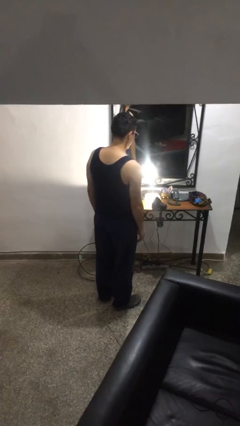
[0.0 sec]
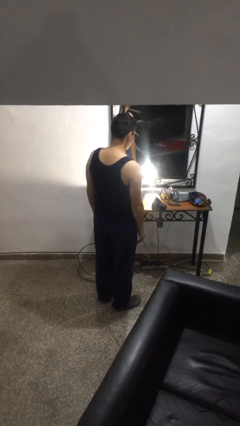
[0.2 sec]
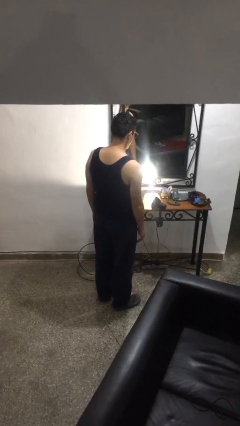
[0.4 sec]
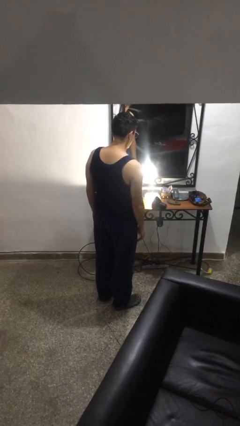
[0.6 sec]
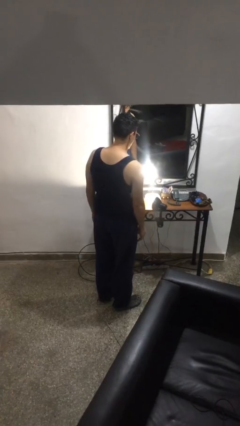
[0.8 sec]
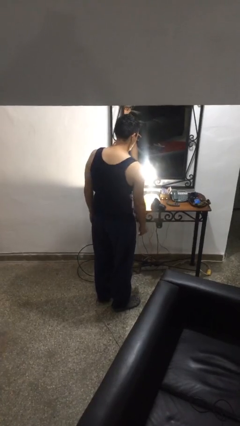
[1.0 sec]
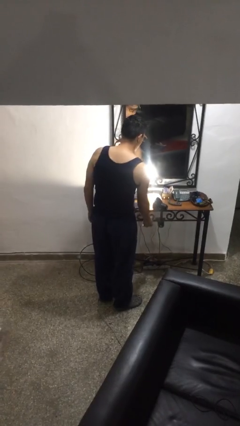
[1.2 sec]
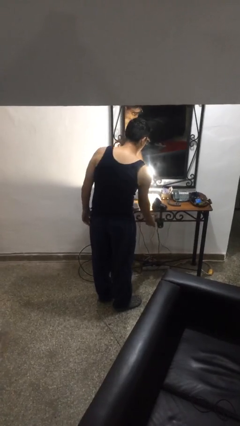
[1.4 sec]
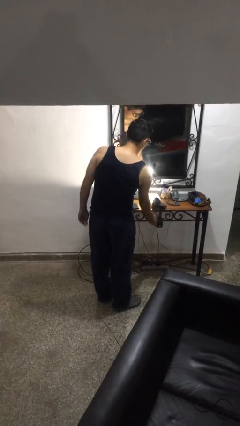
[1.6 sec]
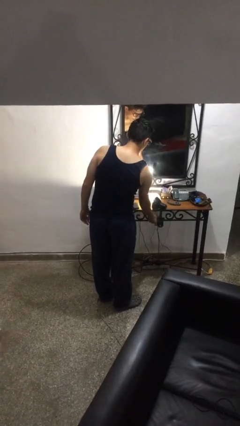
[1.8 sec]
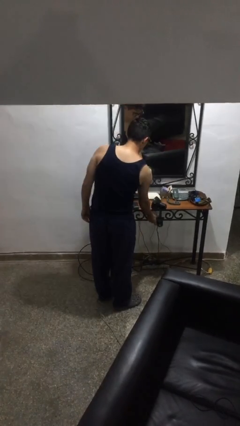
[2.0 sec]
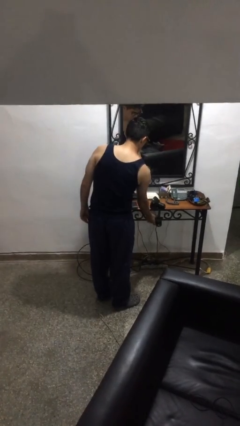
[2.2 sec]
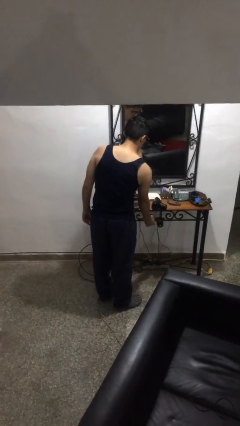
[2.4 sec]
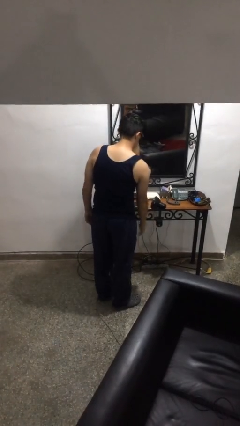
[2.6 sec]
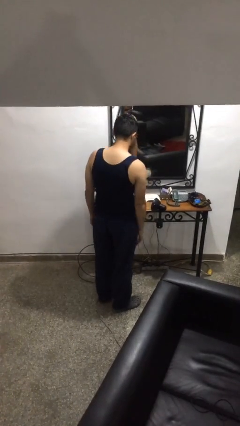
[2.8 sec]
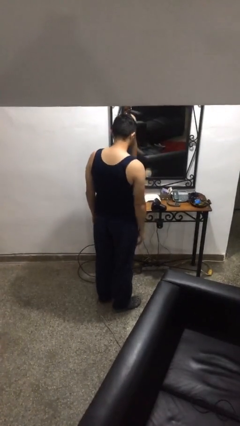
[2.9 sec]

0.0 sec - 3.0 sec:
person turns off lamp

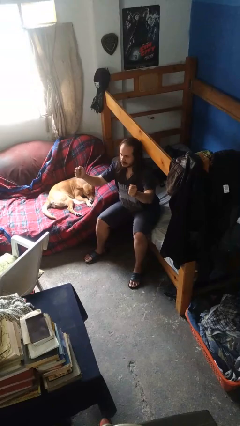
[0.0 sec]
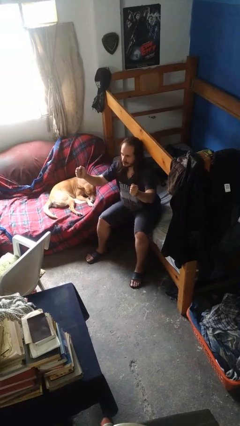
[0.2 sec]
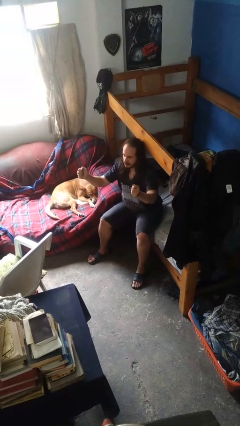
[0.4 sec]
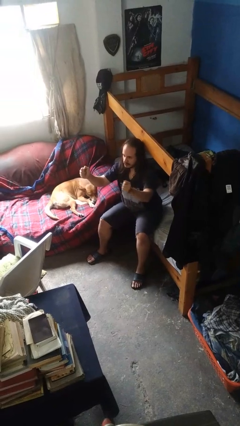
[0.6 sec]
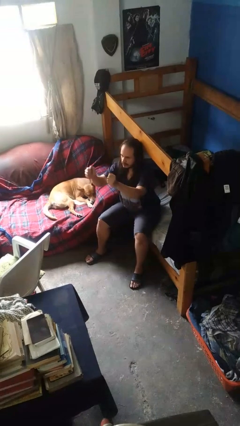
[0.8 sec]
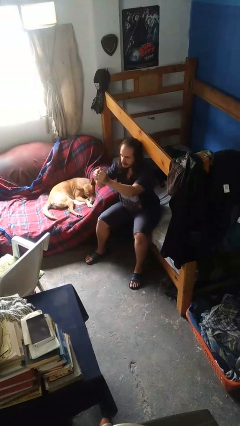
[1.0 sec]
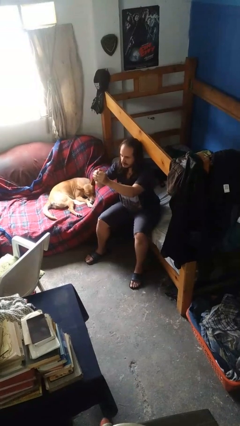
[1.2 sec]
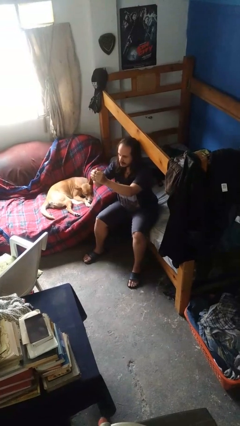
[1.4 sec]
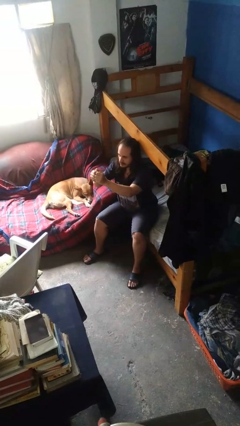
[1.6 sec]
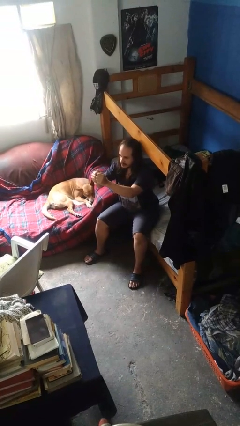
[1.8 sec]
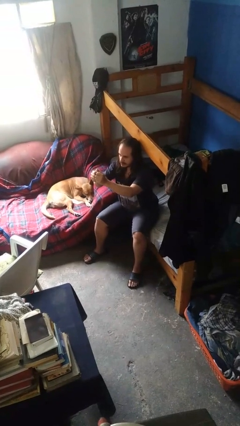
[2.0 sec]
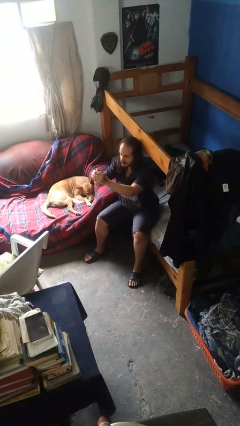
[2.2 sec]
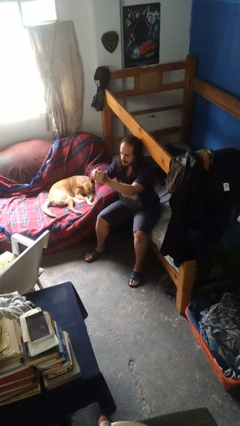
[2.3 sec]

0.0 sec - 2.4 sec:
person gestures zoom out

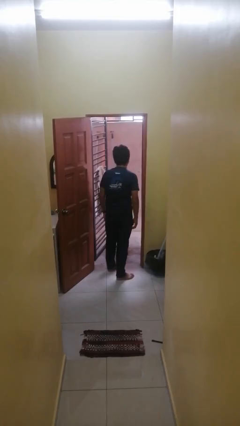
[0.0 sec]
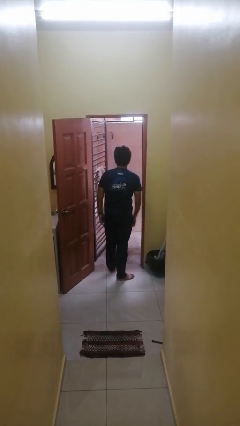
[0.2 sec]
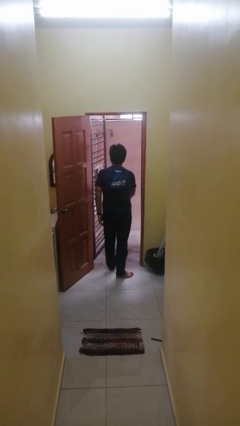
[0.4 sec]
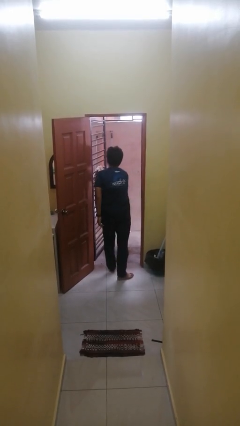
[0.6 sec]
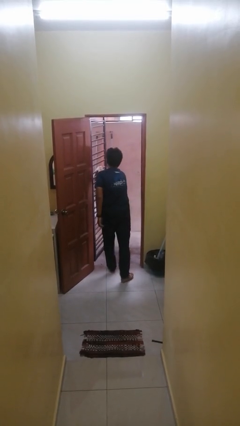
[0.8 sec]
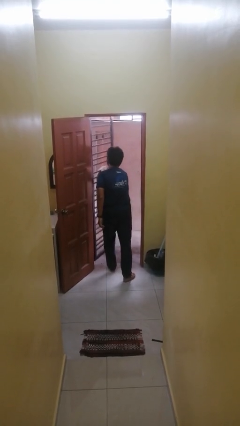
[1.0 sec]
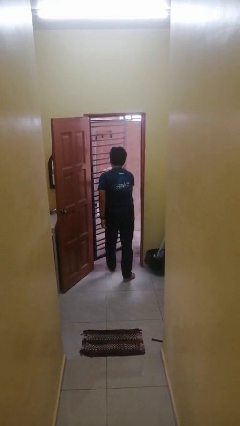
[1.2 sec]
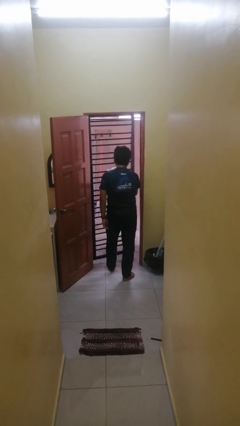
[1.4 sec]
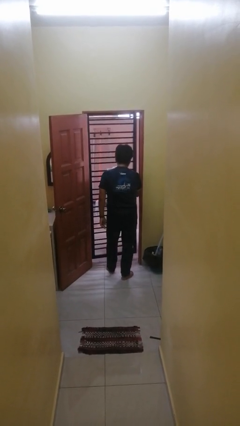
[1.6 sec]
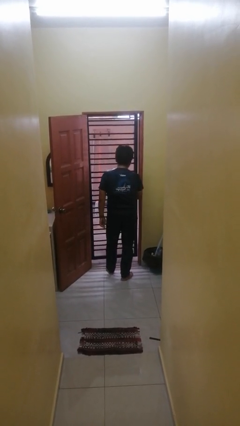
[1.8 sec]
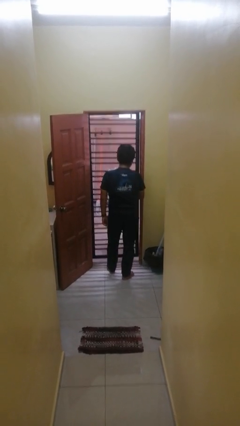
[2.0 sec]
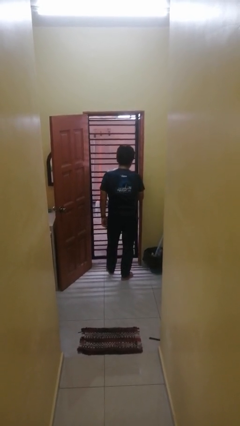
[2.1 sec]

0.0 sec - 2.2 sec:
person closes gate

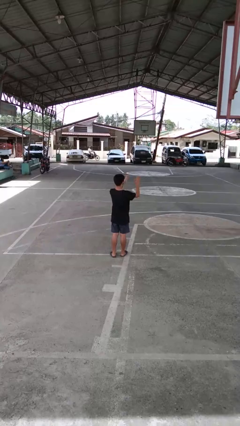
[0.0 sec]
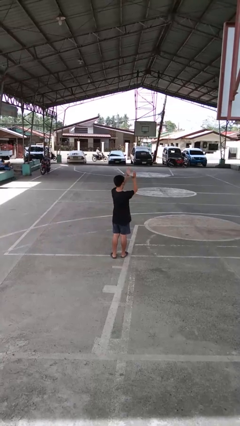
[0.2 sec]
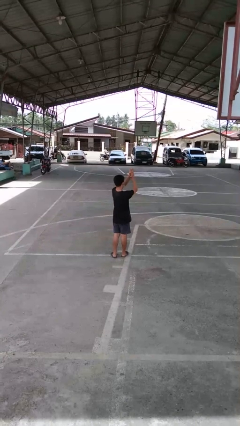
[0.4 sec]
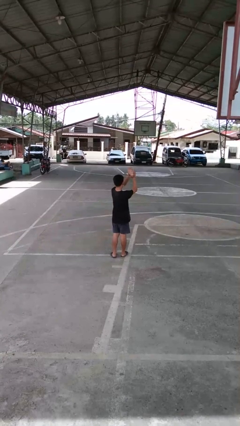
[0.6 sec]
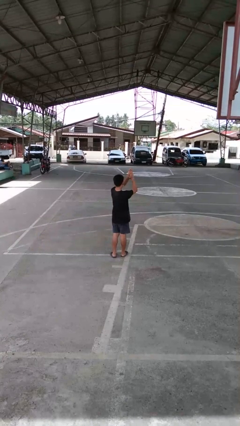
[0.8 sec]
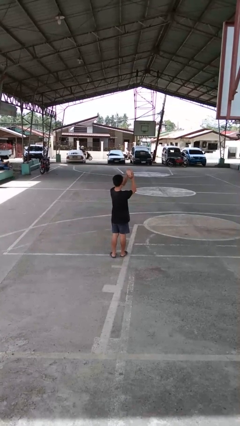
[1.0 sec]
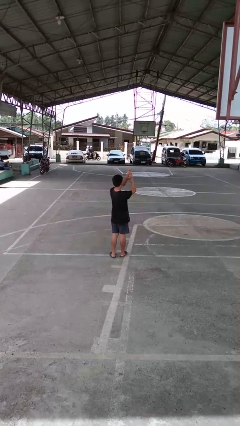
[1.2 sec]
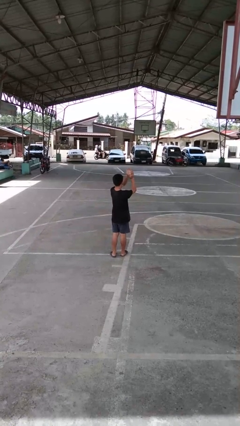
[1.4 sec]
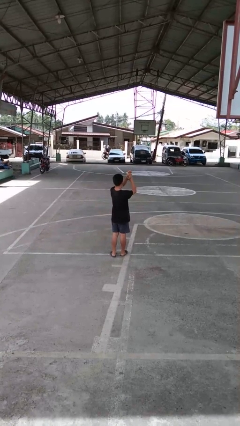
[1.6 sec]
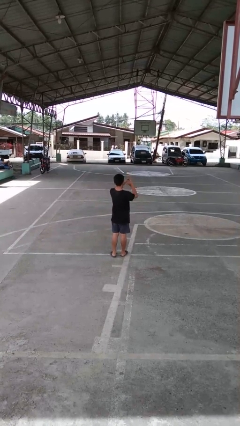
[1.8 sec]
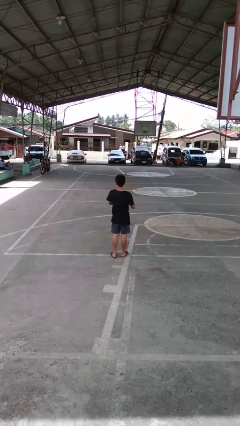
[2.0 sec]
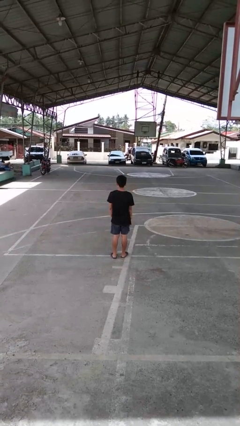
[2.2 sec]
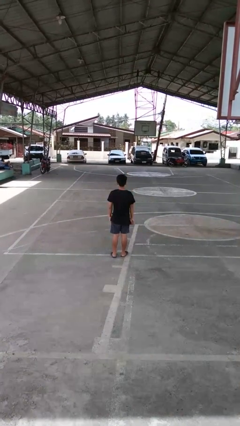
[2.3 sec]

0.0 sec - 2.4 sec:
person claps hands

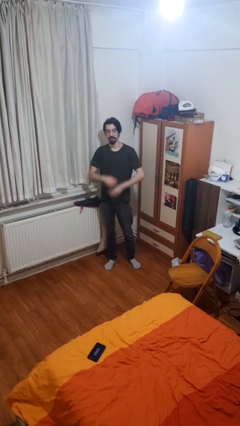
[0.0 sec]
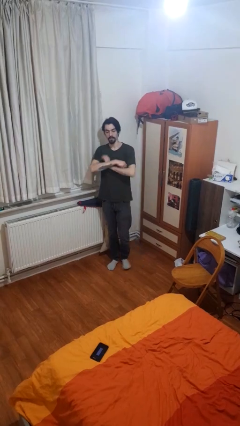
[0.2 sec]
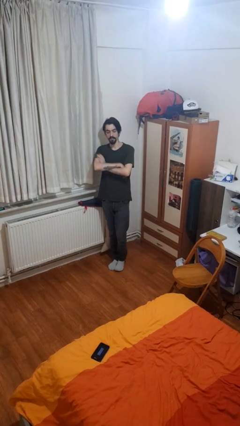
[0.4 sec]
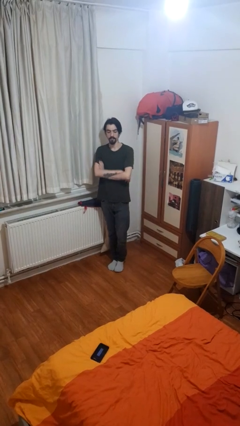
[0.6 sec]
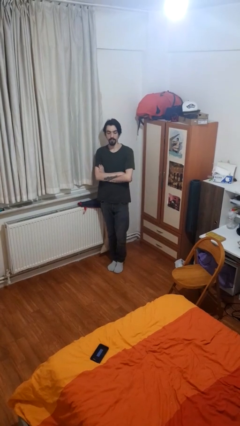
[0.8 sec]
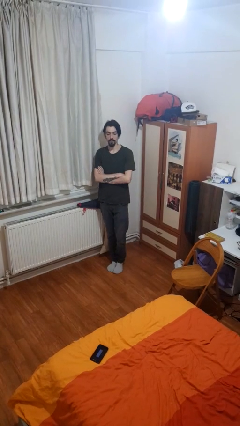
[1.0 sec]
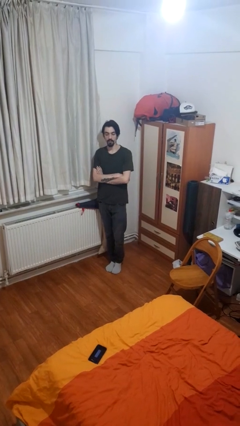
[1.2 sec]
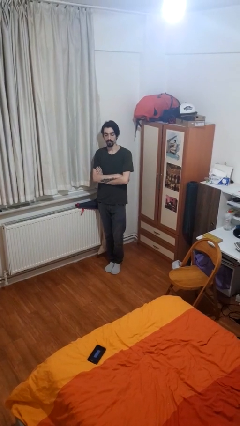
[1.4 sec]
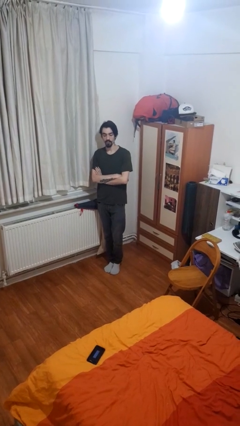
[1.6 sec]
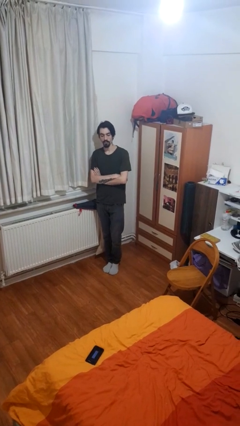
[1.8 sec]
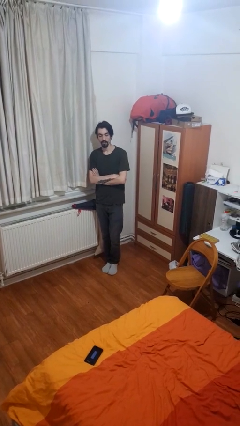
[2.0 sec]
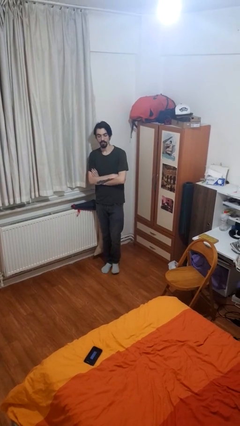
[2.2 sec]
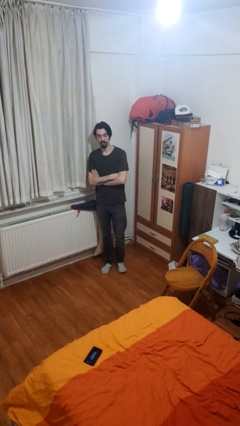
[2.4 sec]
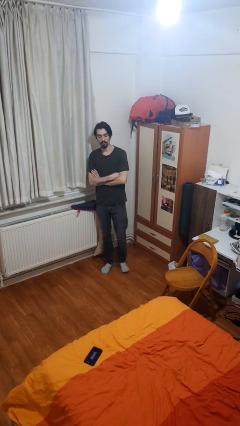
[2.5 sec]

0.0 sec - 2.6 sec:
person crosses arms

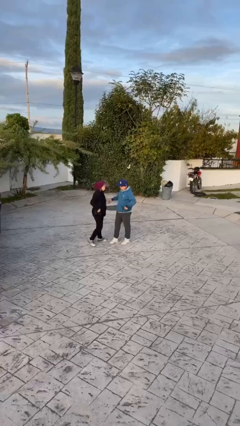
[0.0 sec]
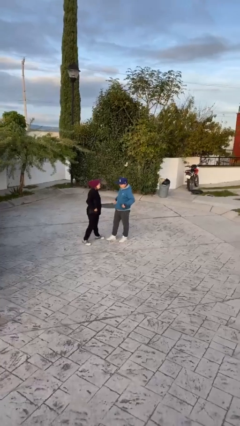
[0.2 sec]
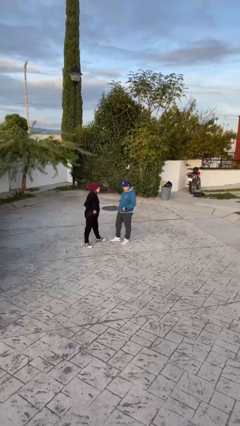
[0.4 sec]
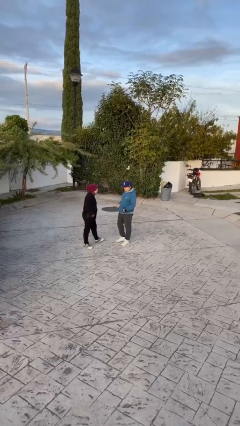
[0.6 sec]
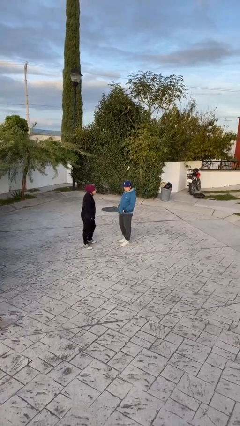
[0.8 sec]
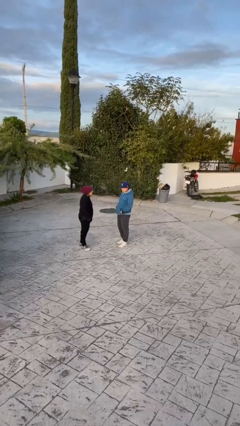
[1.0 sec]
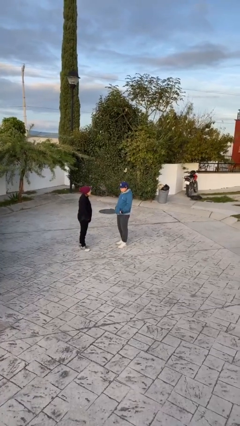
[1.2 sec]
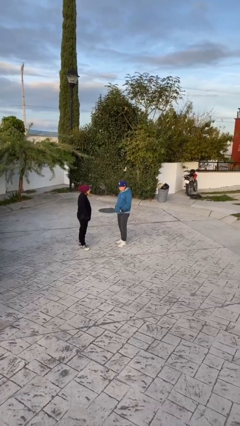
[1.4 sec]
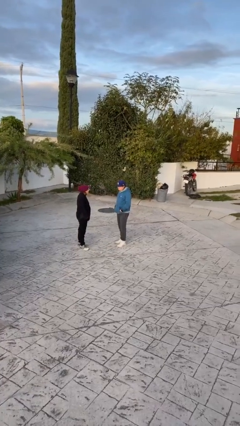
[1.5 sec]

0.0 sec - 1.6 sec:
person talks to person

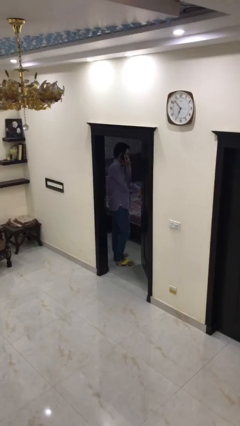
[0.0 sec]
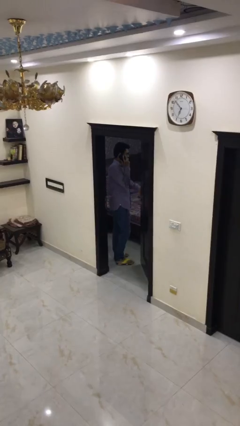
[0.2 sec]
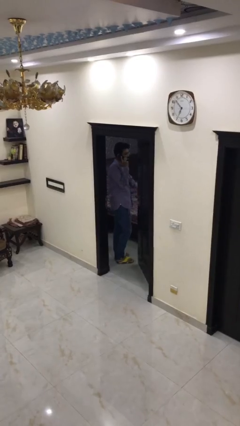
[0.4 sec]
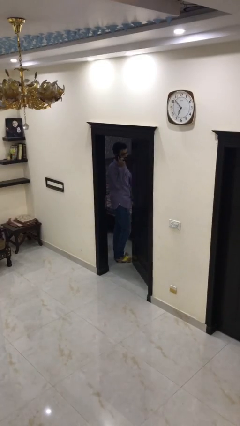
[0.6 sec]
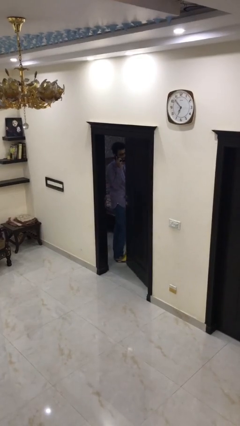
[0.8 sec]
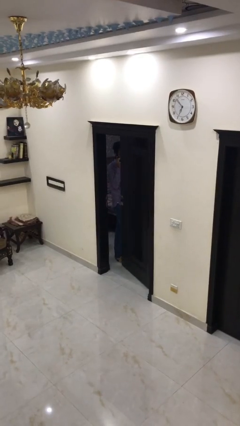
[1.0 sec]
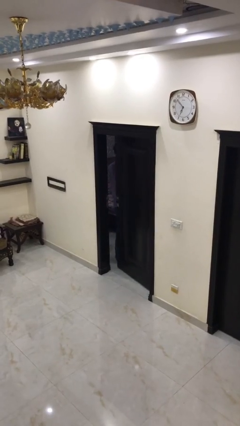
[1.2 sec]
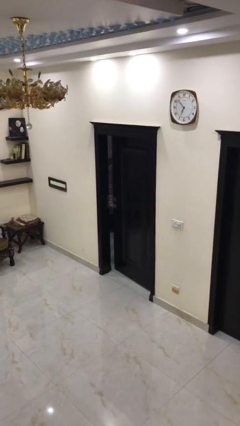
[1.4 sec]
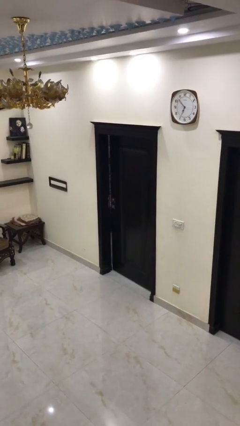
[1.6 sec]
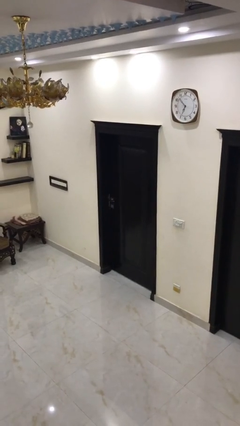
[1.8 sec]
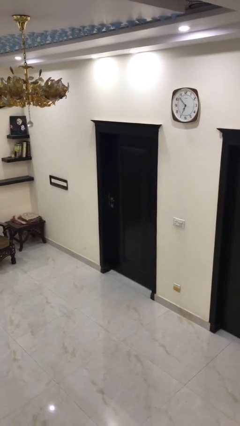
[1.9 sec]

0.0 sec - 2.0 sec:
person closes facility door

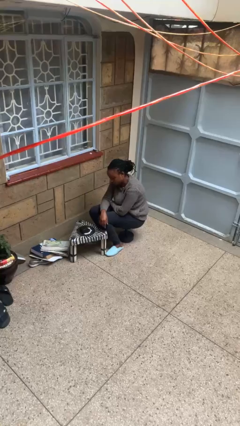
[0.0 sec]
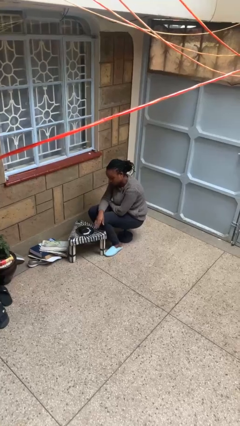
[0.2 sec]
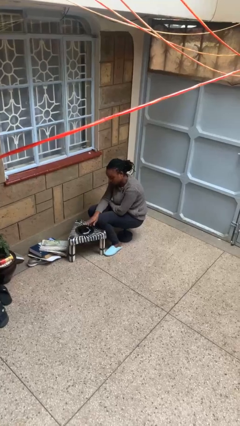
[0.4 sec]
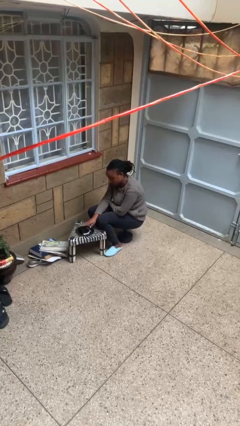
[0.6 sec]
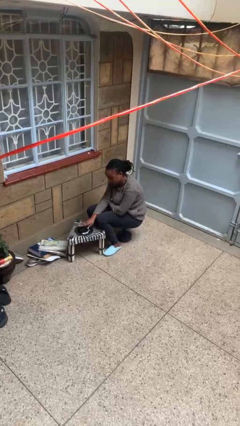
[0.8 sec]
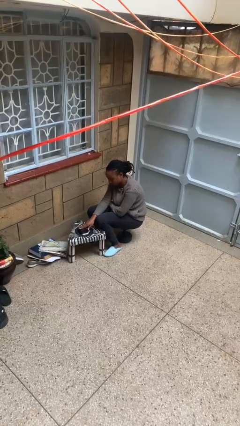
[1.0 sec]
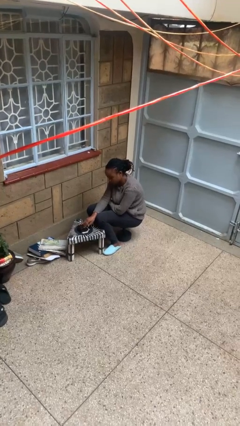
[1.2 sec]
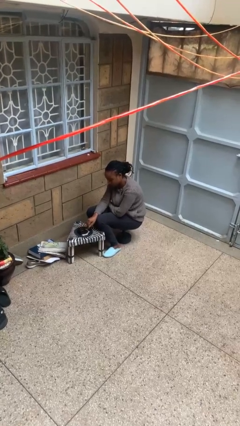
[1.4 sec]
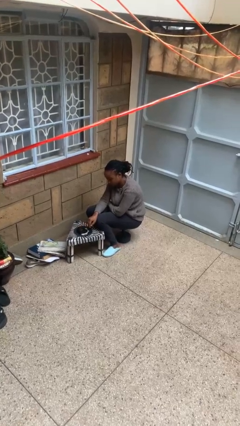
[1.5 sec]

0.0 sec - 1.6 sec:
person taps object with finger
